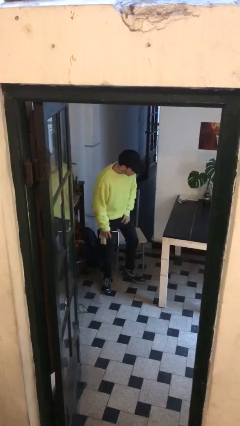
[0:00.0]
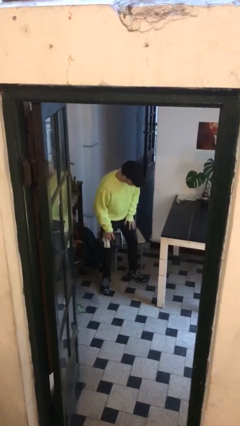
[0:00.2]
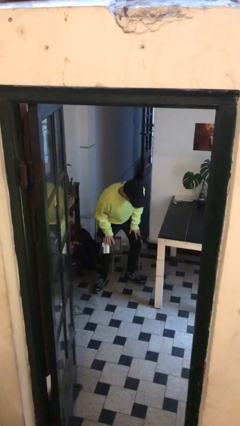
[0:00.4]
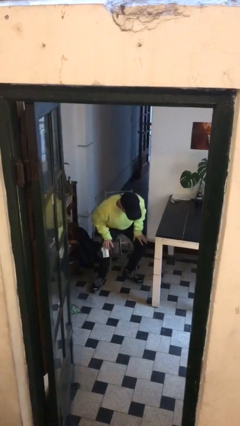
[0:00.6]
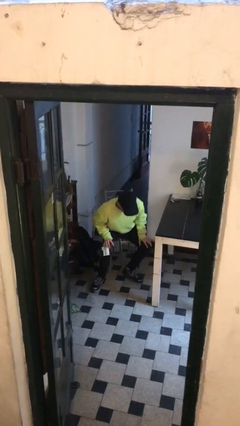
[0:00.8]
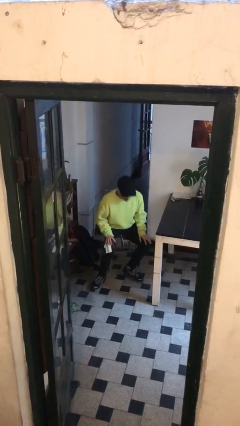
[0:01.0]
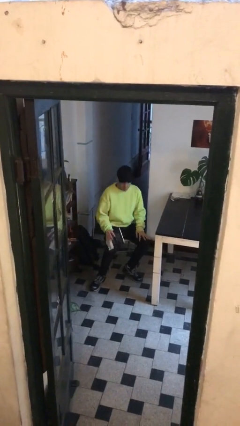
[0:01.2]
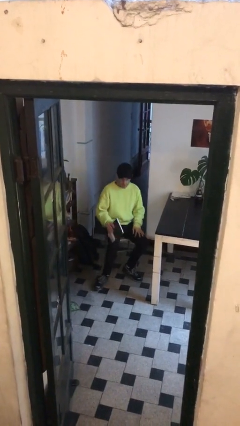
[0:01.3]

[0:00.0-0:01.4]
person sits down

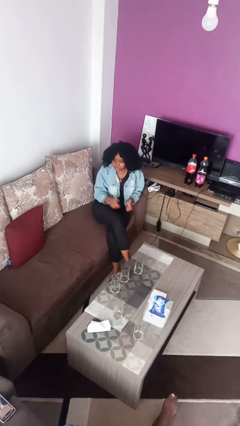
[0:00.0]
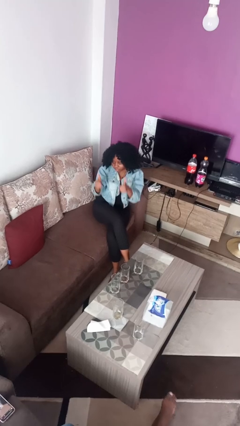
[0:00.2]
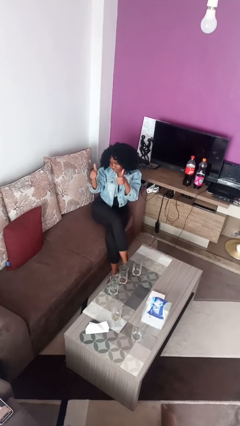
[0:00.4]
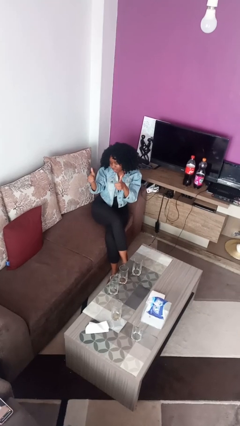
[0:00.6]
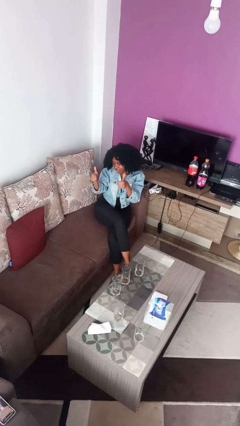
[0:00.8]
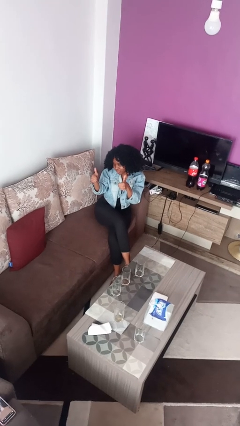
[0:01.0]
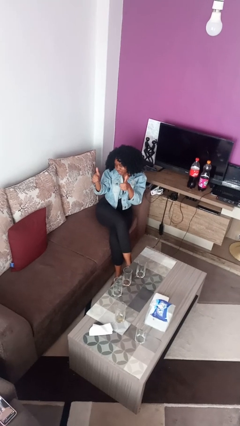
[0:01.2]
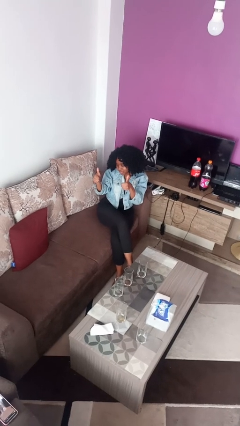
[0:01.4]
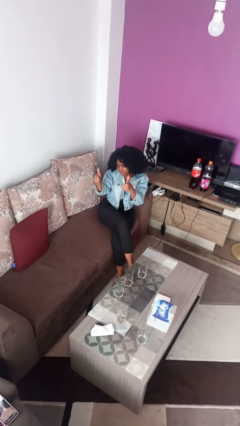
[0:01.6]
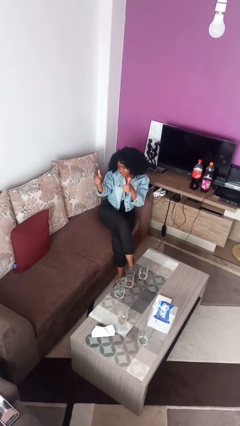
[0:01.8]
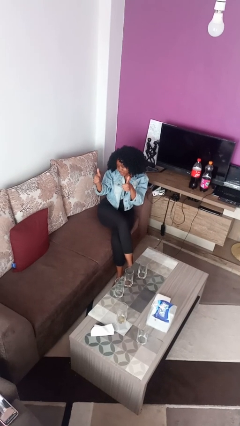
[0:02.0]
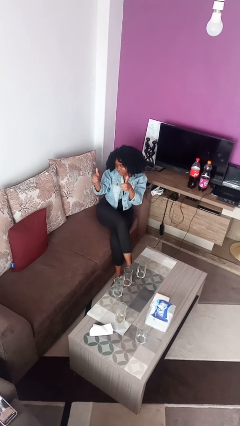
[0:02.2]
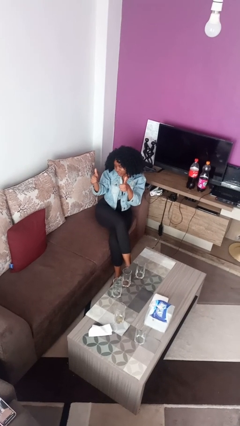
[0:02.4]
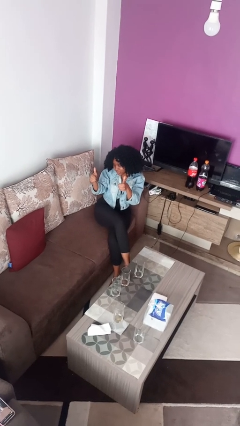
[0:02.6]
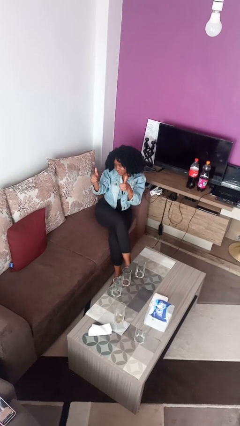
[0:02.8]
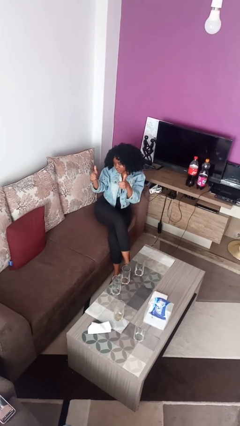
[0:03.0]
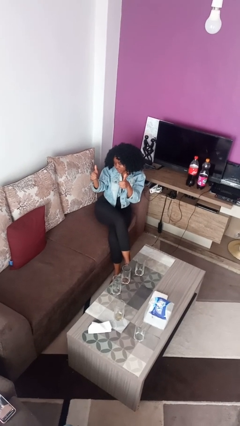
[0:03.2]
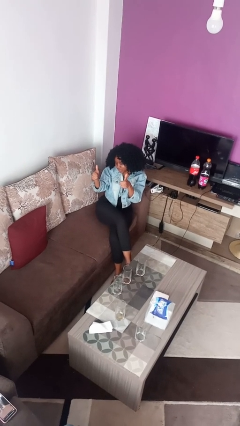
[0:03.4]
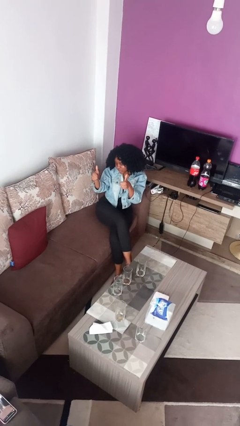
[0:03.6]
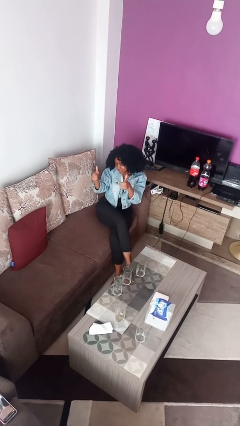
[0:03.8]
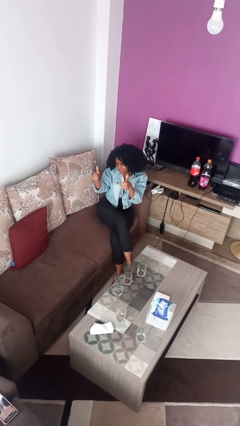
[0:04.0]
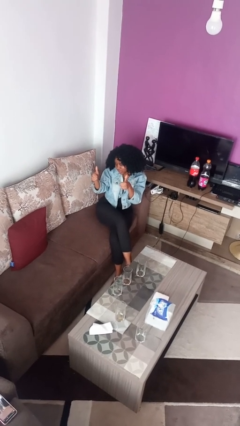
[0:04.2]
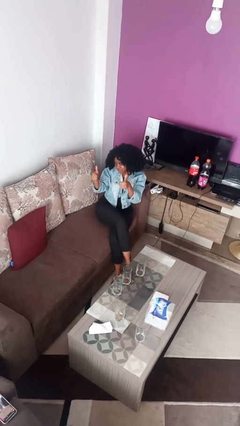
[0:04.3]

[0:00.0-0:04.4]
person gestures thumbs up

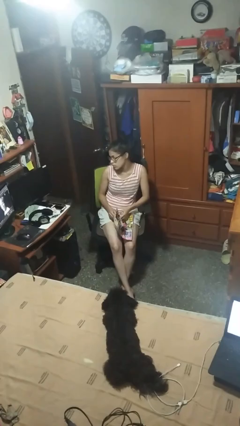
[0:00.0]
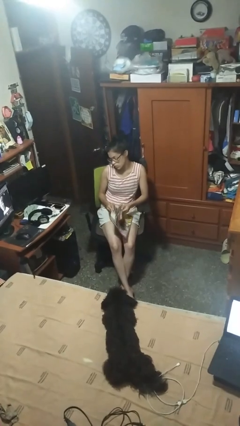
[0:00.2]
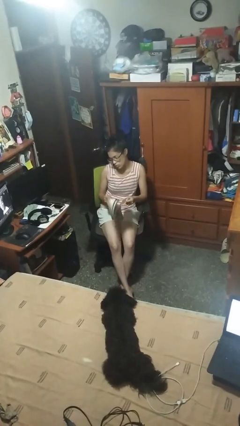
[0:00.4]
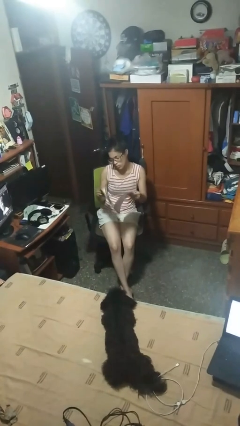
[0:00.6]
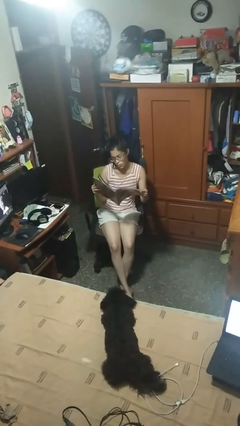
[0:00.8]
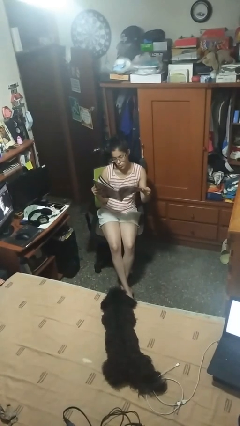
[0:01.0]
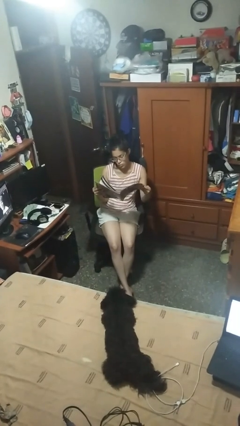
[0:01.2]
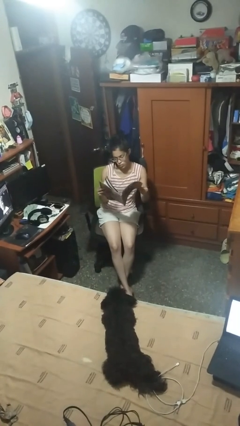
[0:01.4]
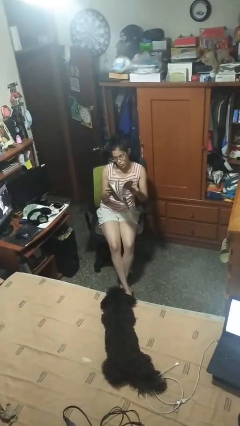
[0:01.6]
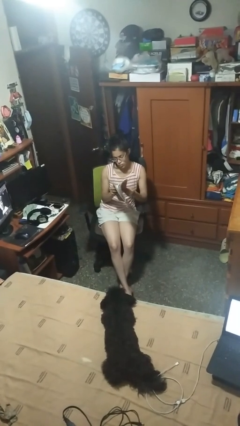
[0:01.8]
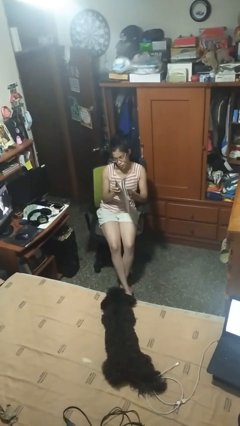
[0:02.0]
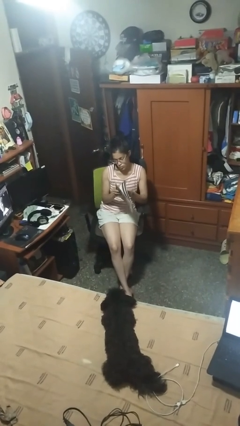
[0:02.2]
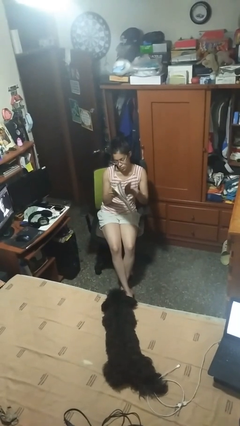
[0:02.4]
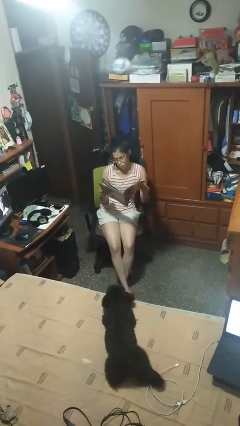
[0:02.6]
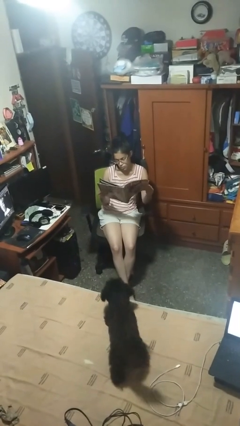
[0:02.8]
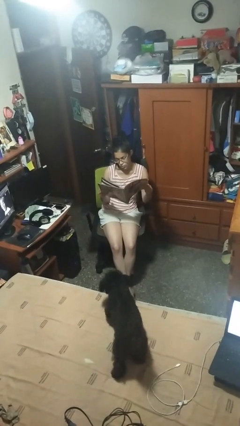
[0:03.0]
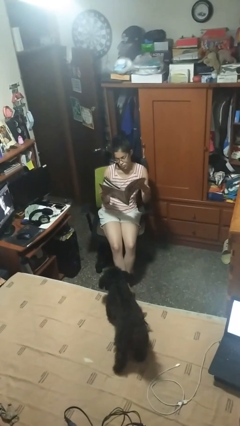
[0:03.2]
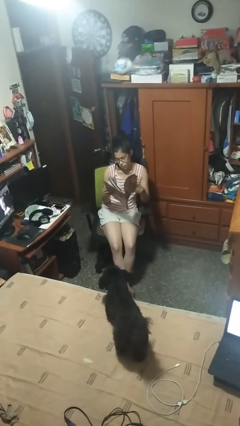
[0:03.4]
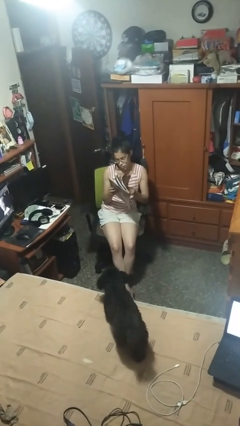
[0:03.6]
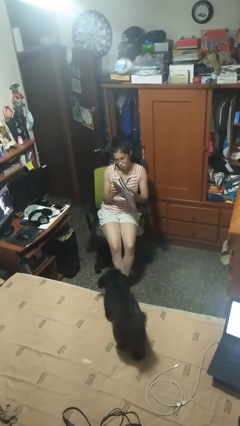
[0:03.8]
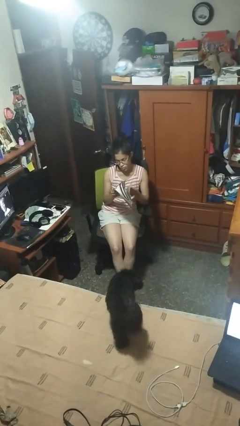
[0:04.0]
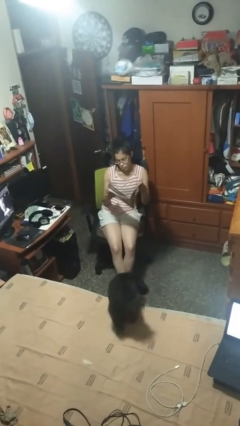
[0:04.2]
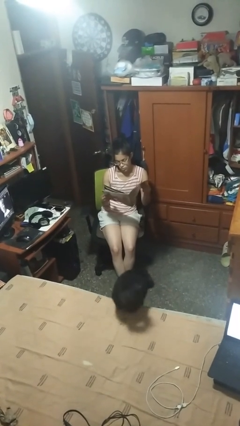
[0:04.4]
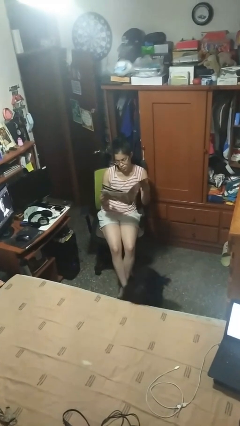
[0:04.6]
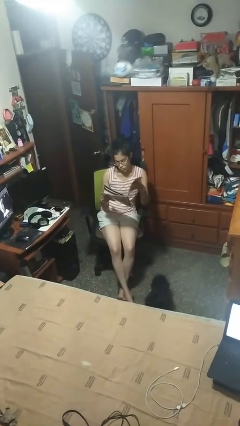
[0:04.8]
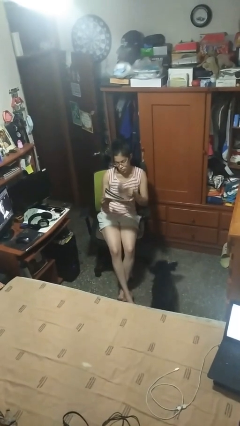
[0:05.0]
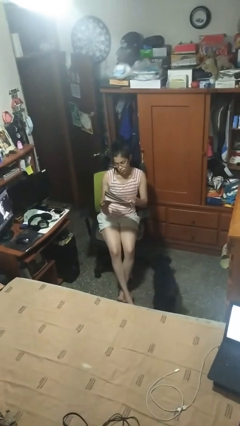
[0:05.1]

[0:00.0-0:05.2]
person reads magazine

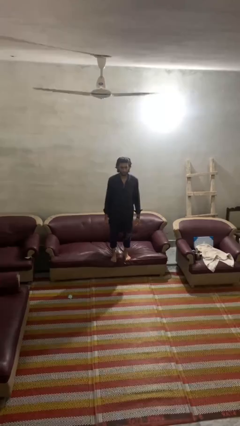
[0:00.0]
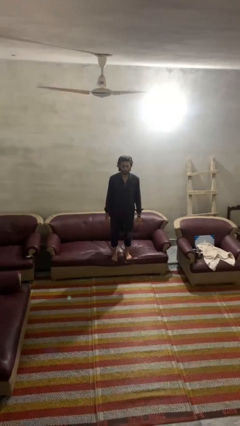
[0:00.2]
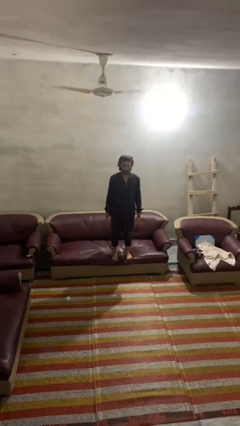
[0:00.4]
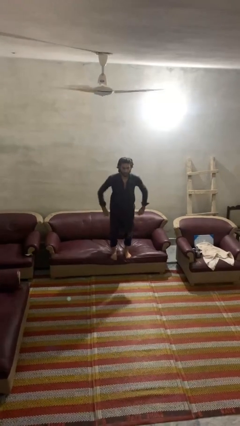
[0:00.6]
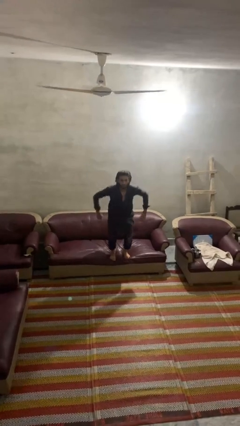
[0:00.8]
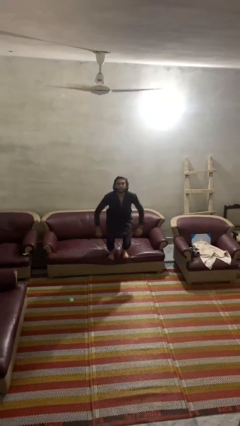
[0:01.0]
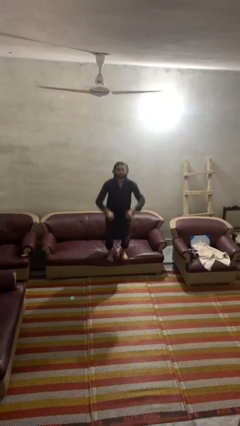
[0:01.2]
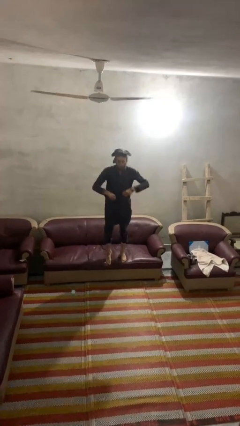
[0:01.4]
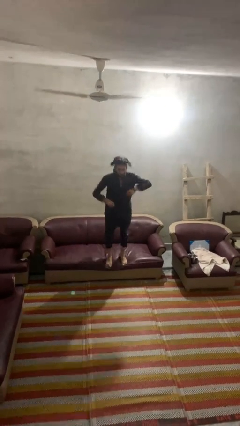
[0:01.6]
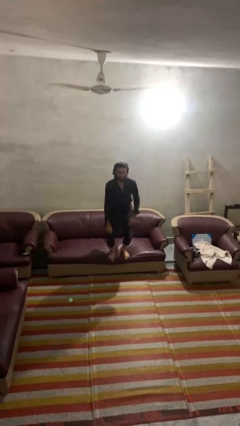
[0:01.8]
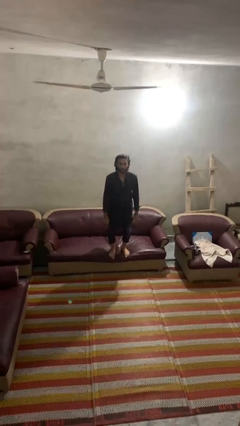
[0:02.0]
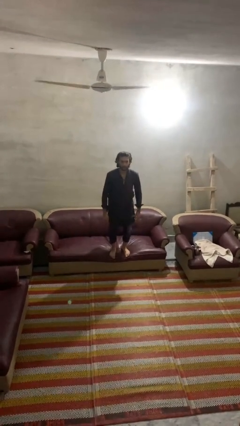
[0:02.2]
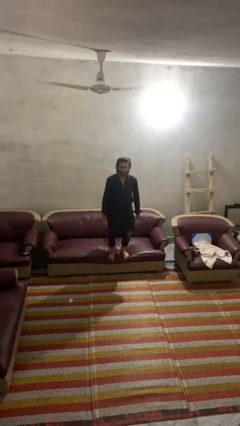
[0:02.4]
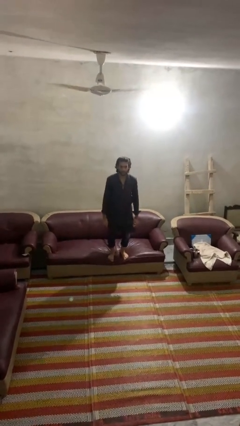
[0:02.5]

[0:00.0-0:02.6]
person jumps on couch

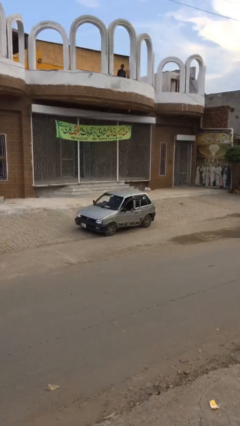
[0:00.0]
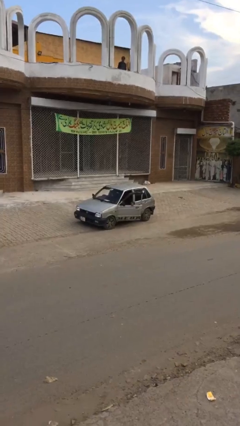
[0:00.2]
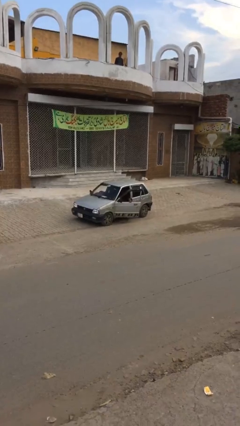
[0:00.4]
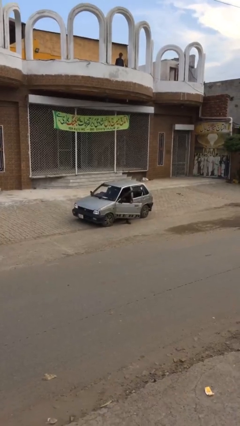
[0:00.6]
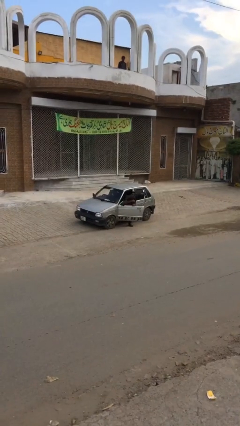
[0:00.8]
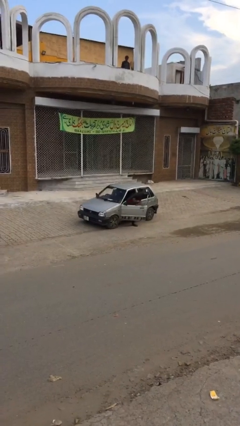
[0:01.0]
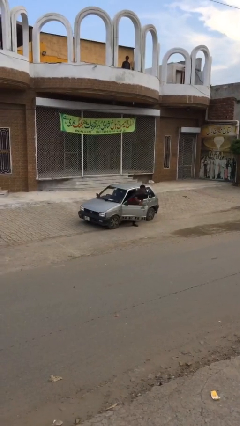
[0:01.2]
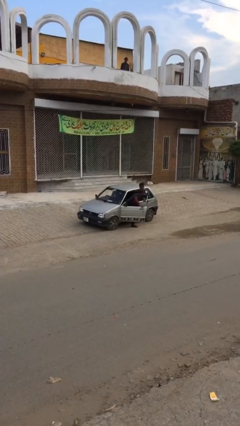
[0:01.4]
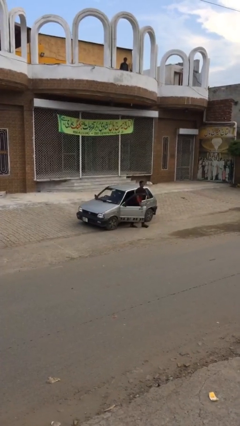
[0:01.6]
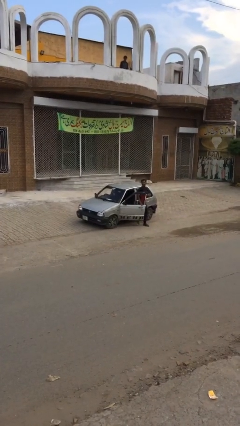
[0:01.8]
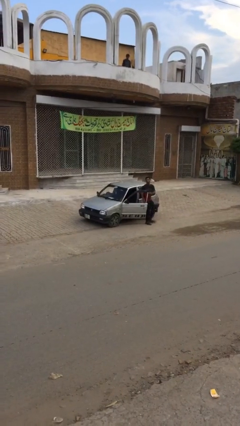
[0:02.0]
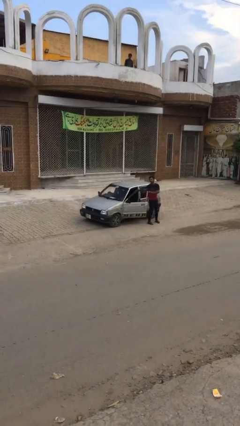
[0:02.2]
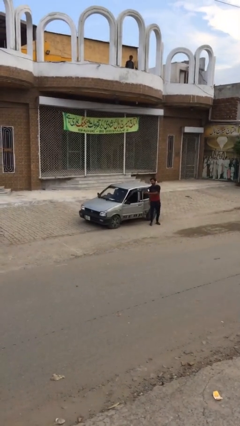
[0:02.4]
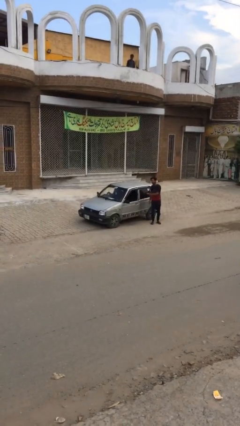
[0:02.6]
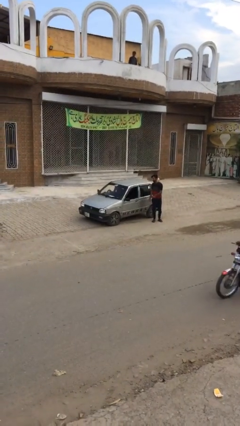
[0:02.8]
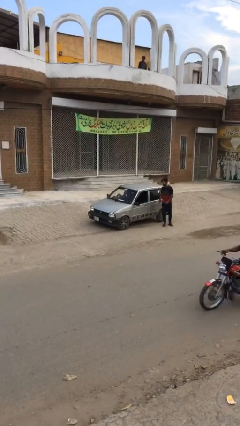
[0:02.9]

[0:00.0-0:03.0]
car drops off person

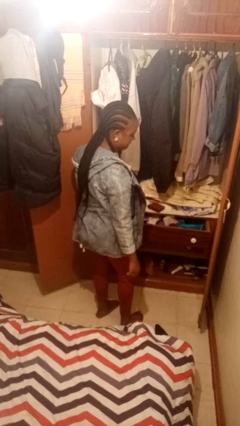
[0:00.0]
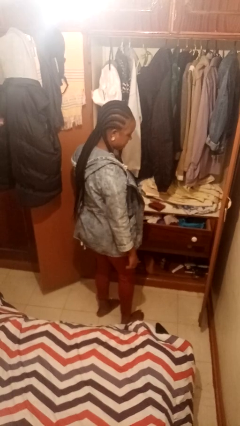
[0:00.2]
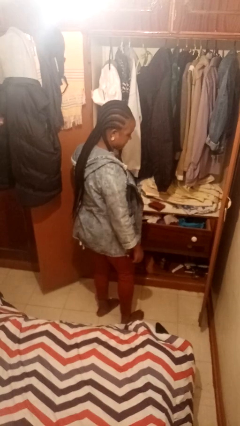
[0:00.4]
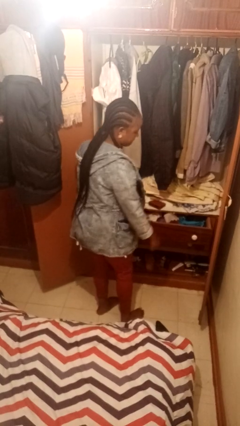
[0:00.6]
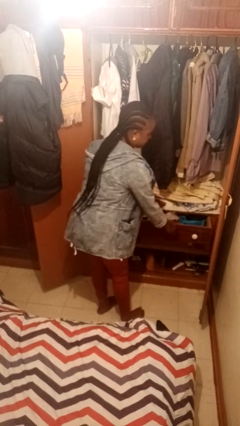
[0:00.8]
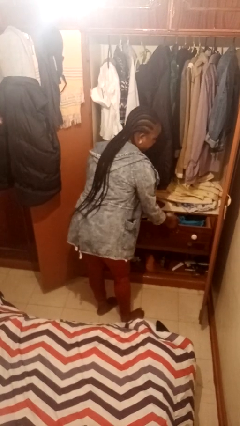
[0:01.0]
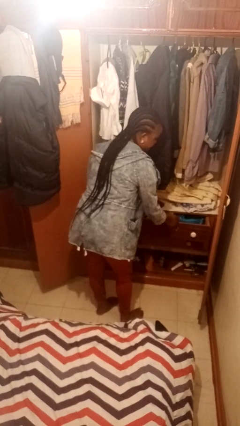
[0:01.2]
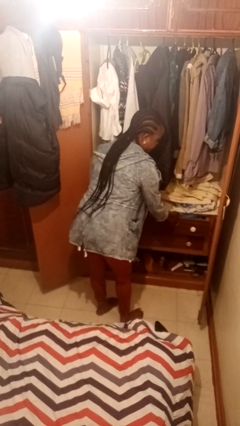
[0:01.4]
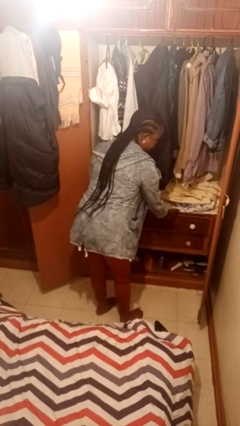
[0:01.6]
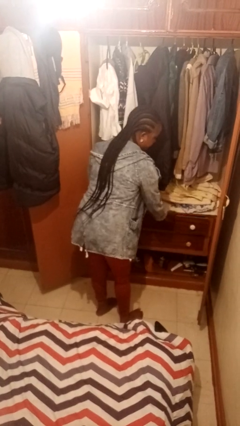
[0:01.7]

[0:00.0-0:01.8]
person closes dresser drawer
